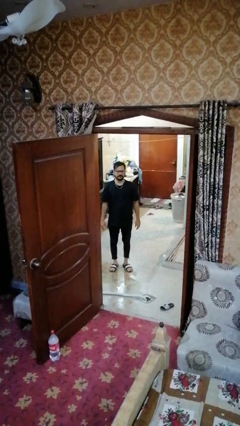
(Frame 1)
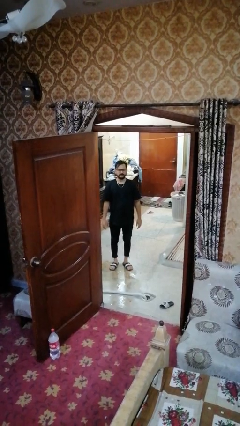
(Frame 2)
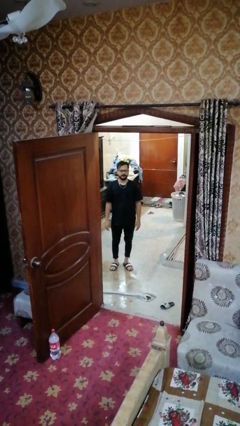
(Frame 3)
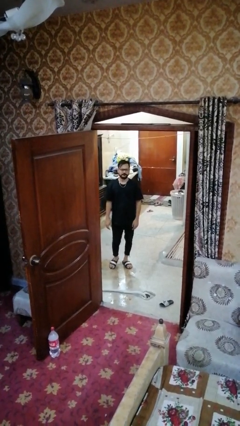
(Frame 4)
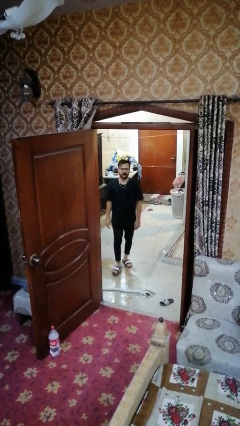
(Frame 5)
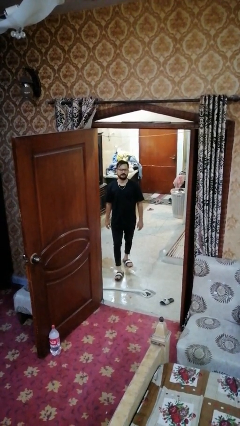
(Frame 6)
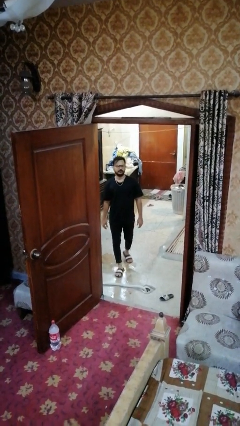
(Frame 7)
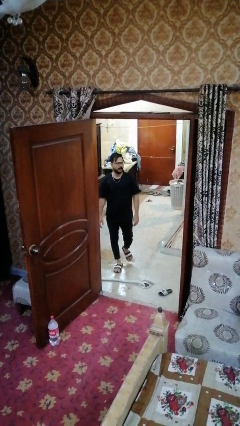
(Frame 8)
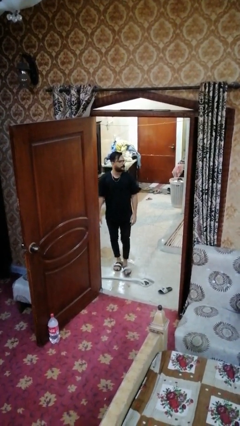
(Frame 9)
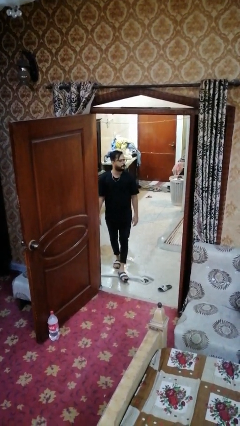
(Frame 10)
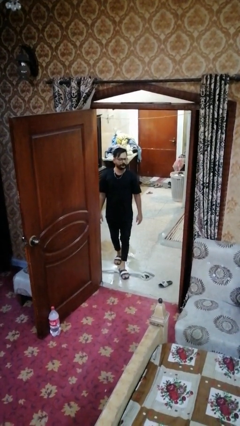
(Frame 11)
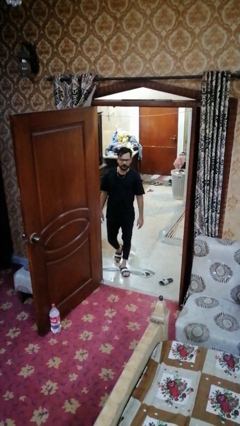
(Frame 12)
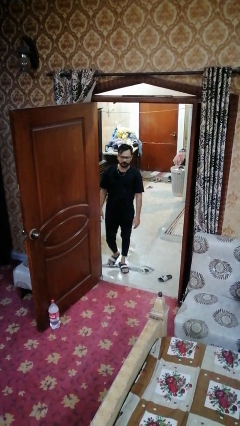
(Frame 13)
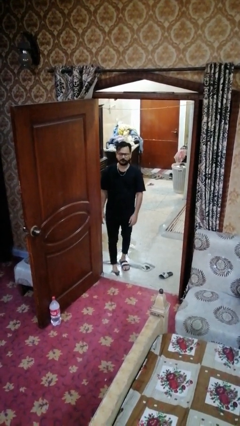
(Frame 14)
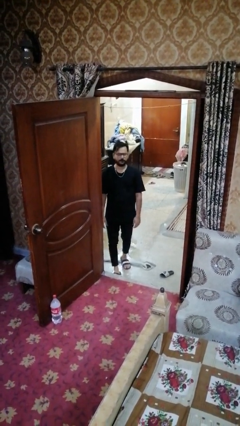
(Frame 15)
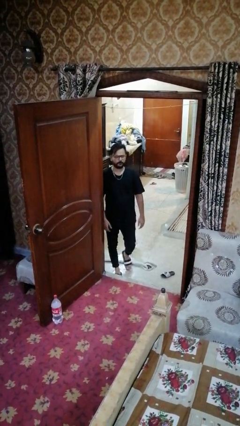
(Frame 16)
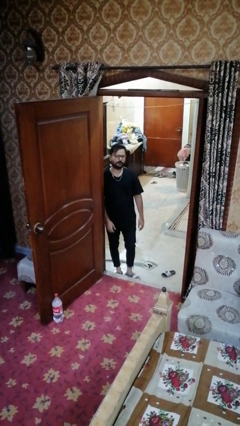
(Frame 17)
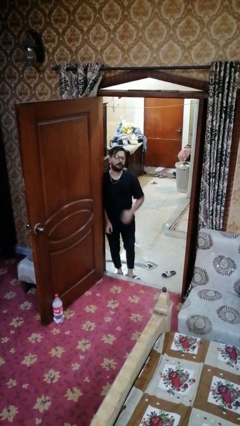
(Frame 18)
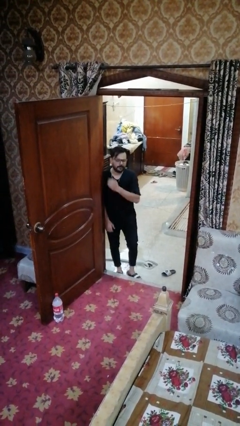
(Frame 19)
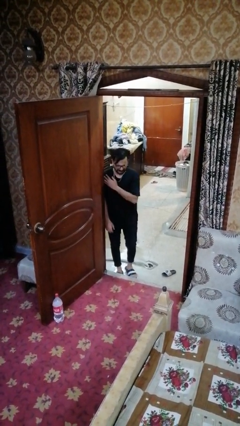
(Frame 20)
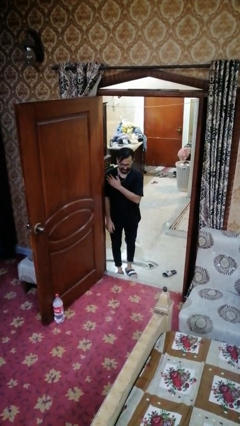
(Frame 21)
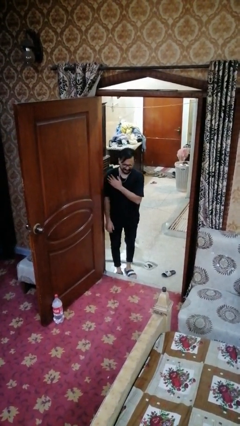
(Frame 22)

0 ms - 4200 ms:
person bumps into wall

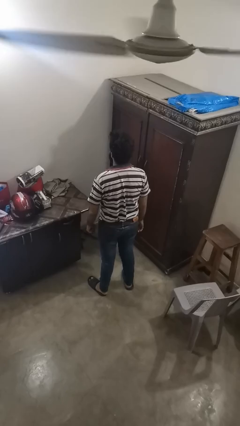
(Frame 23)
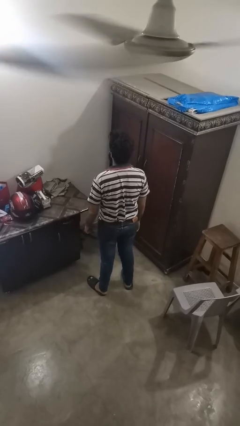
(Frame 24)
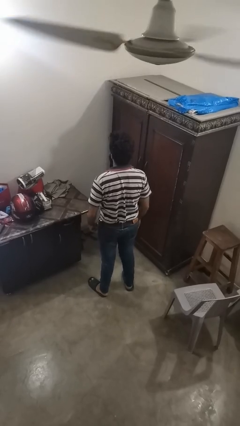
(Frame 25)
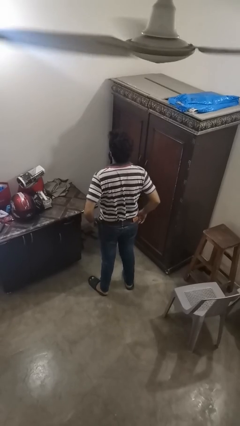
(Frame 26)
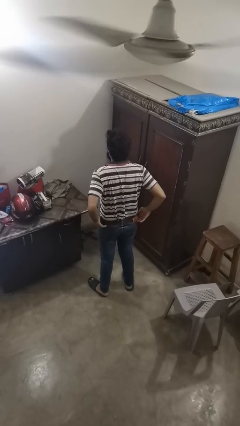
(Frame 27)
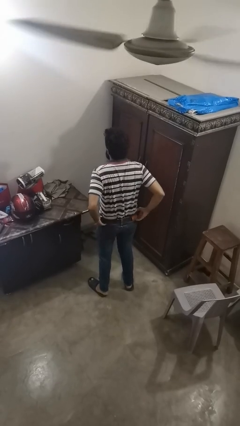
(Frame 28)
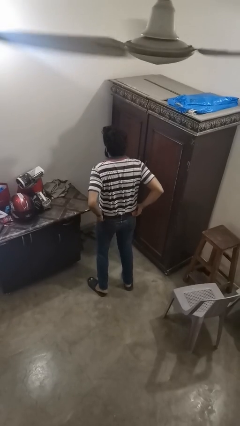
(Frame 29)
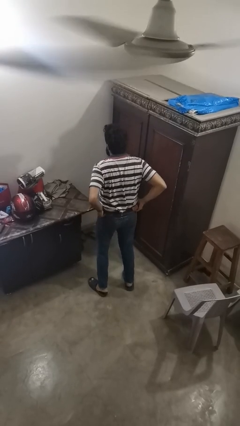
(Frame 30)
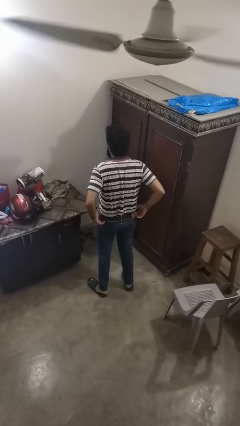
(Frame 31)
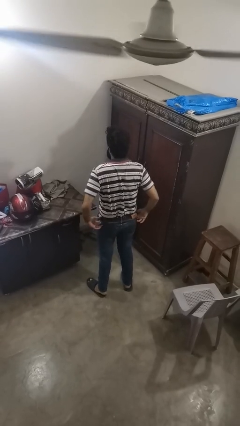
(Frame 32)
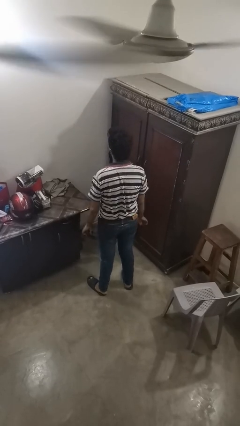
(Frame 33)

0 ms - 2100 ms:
person hikes up pants

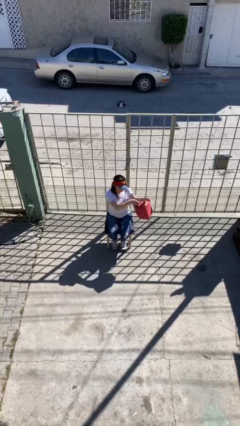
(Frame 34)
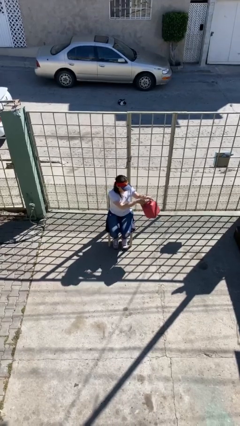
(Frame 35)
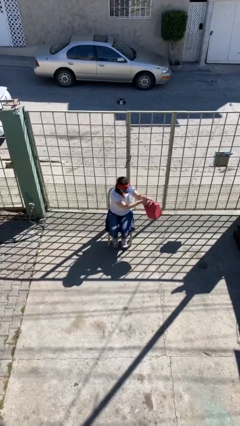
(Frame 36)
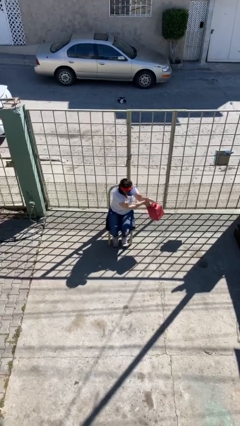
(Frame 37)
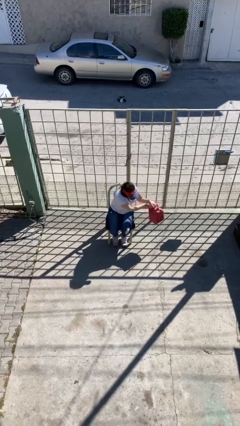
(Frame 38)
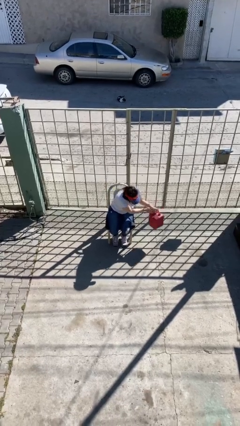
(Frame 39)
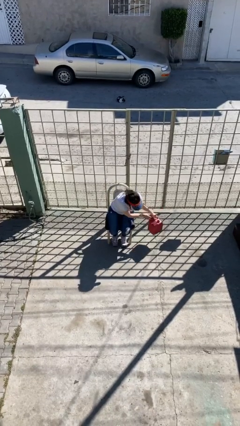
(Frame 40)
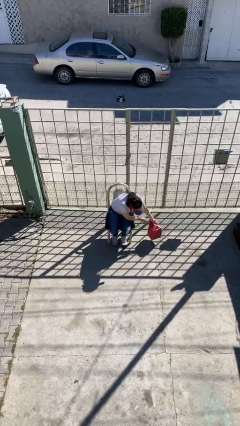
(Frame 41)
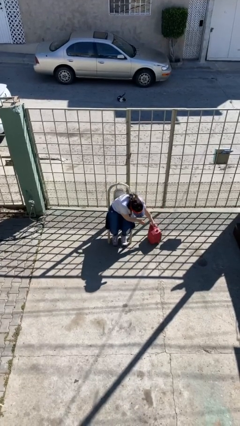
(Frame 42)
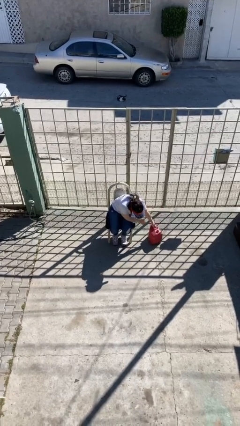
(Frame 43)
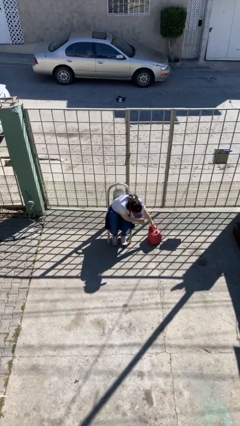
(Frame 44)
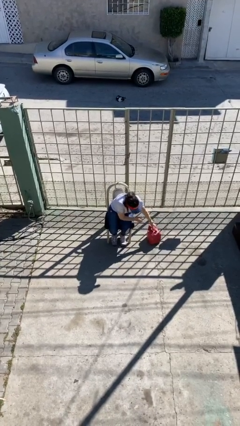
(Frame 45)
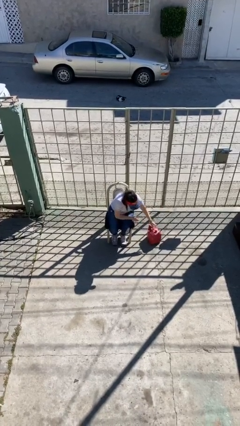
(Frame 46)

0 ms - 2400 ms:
person puts down object on shelf

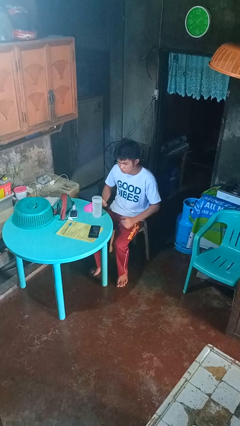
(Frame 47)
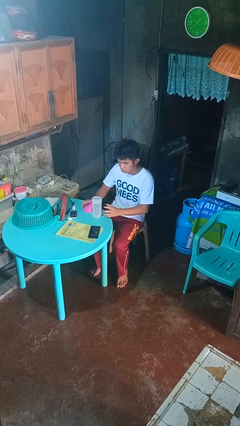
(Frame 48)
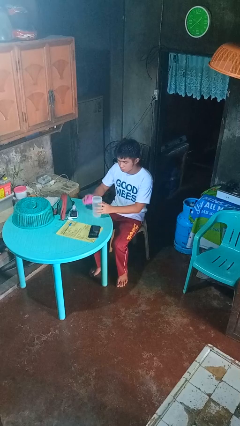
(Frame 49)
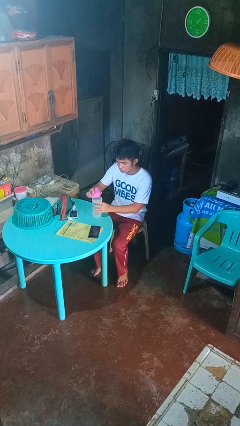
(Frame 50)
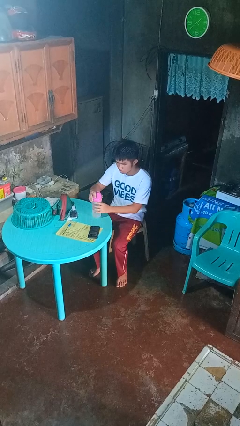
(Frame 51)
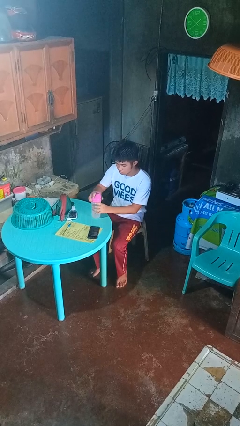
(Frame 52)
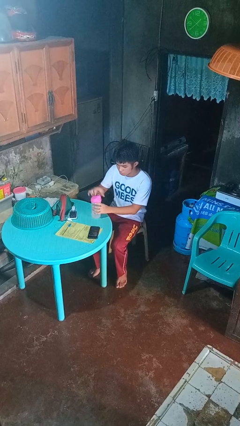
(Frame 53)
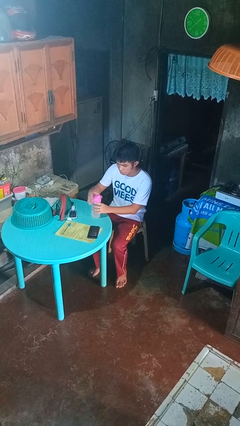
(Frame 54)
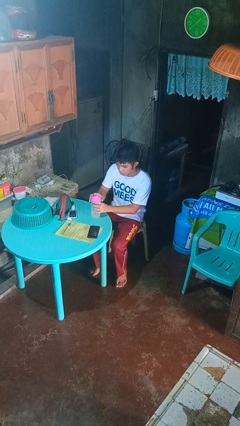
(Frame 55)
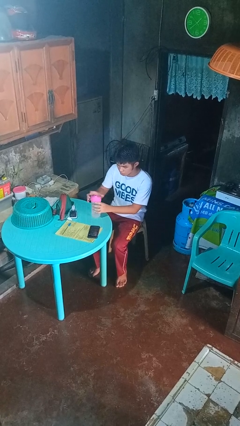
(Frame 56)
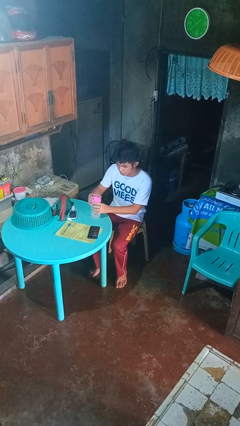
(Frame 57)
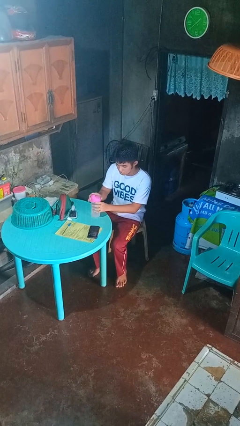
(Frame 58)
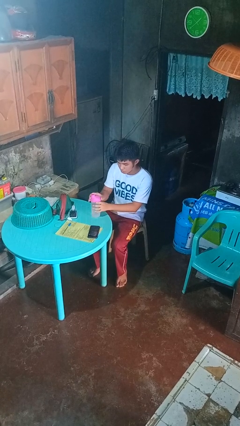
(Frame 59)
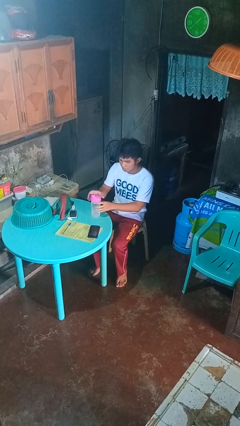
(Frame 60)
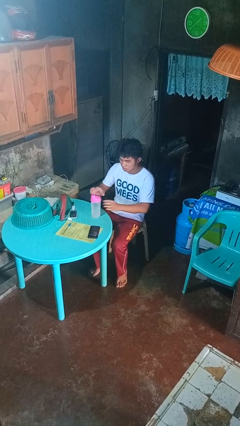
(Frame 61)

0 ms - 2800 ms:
person screws lid to bottle

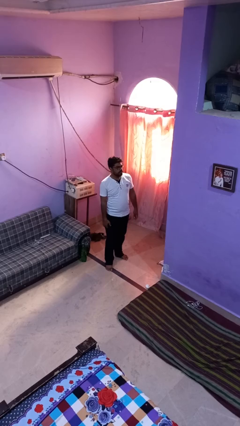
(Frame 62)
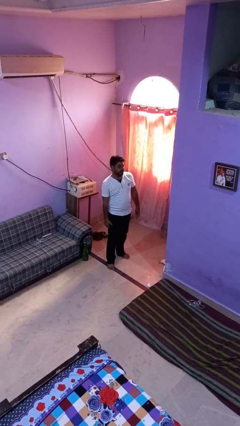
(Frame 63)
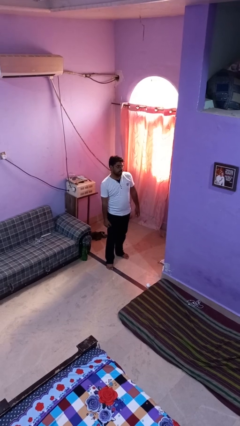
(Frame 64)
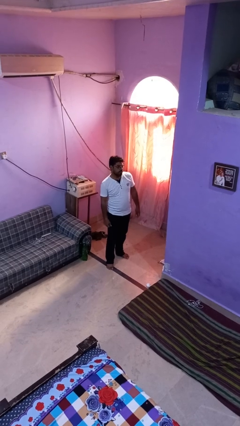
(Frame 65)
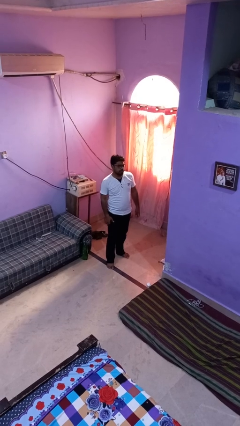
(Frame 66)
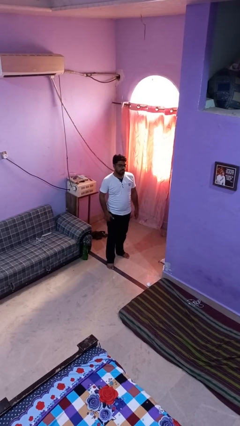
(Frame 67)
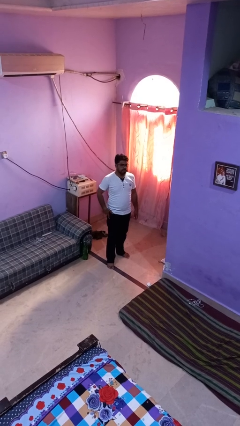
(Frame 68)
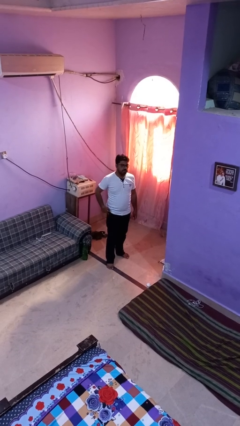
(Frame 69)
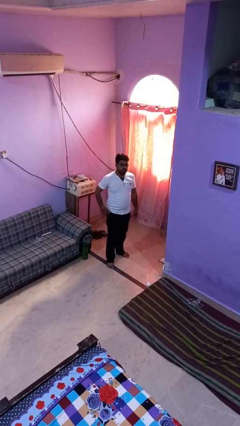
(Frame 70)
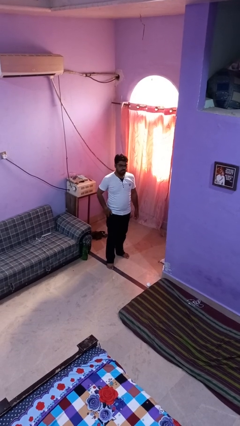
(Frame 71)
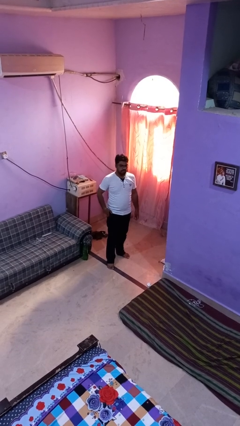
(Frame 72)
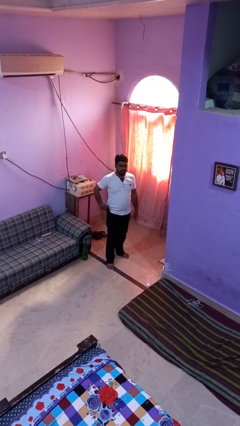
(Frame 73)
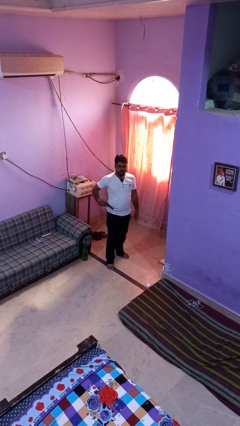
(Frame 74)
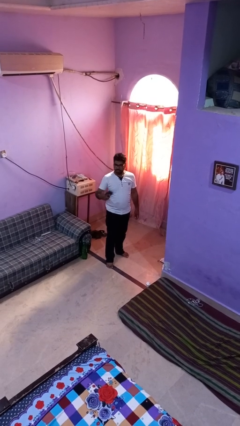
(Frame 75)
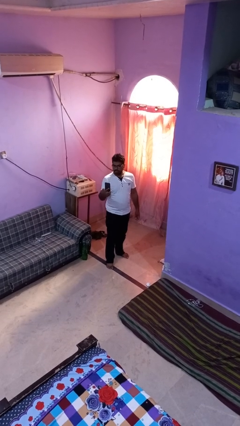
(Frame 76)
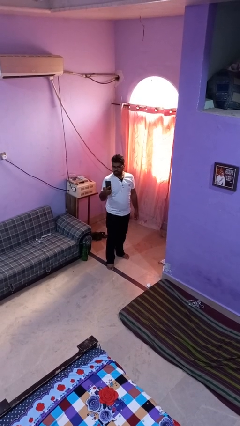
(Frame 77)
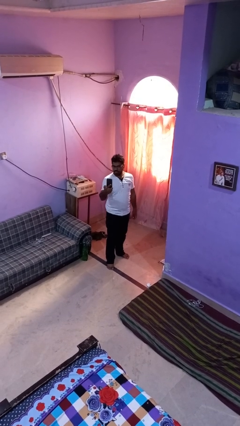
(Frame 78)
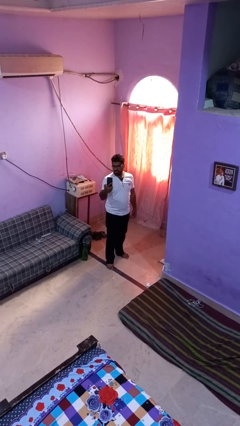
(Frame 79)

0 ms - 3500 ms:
person takes phone from pocket

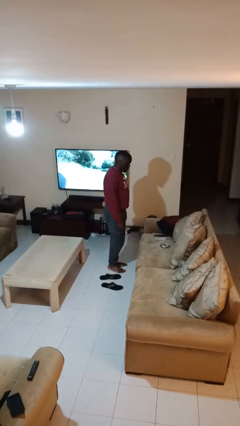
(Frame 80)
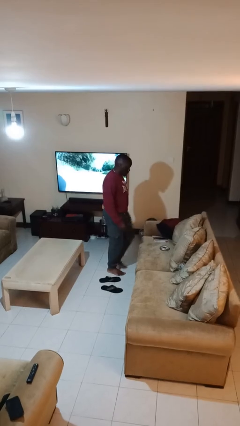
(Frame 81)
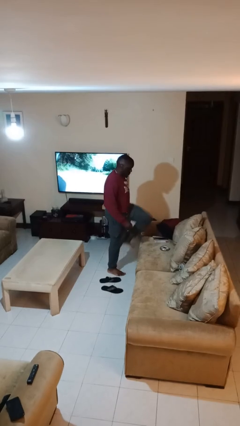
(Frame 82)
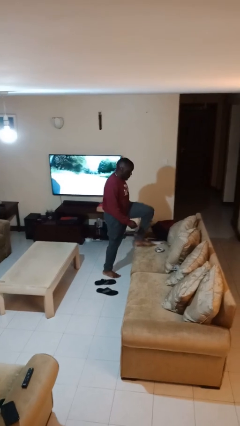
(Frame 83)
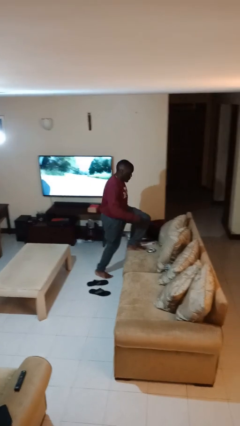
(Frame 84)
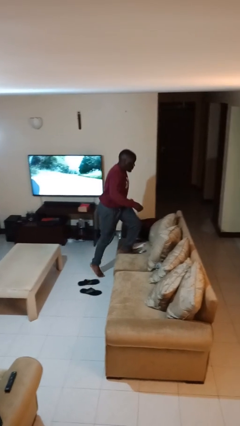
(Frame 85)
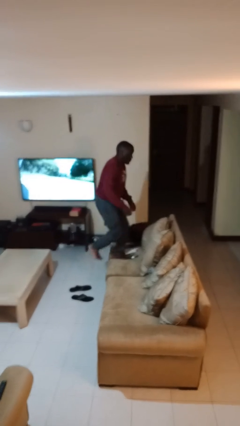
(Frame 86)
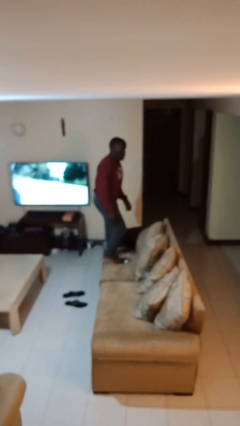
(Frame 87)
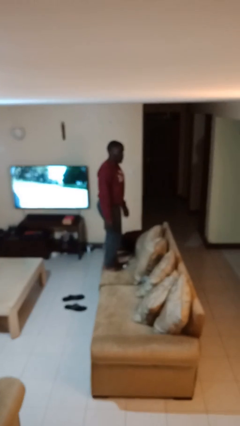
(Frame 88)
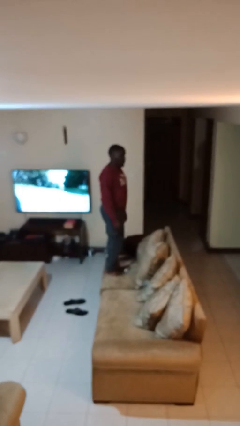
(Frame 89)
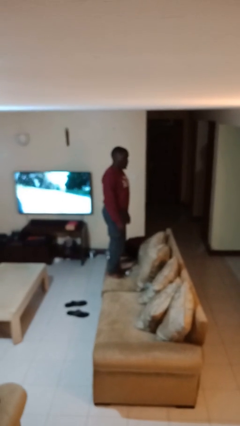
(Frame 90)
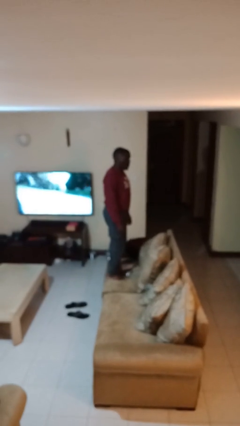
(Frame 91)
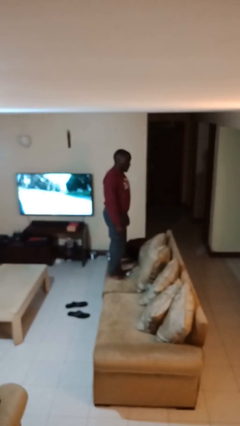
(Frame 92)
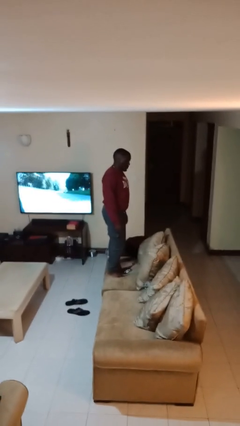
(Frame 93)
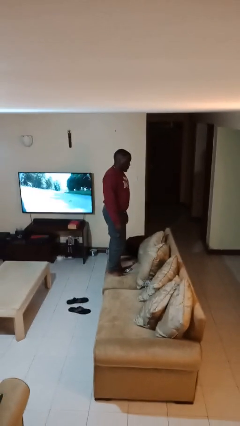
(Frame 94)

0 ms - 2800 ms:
person climbs on couch
